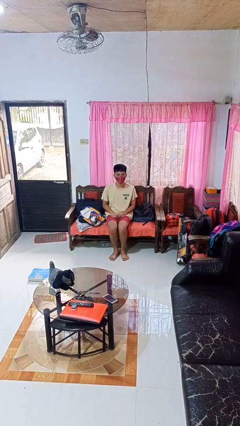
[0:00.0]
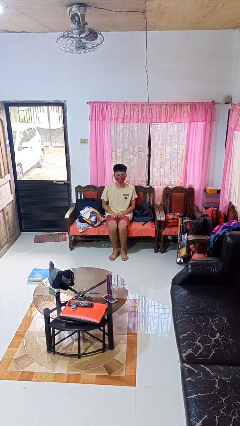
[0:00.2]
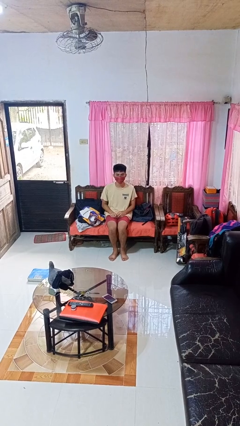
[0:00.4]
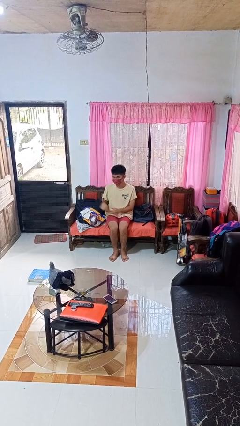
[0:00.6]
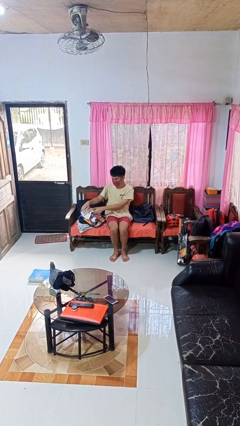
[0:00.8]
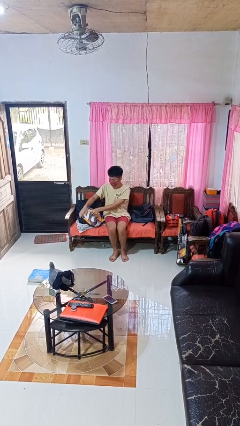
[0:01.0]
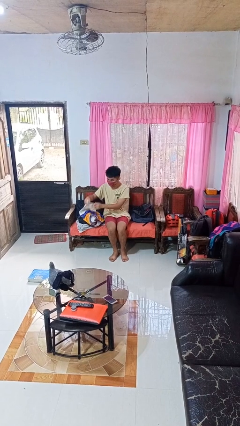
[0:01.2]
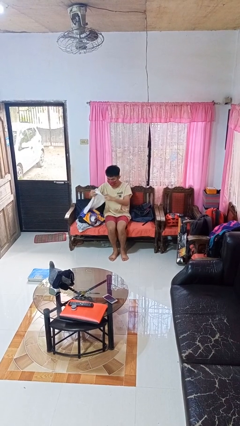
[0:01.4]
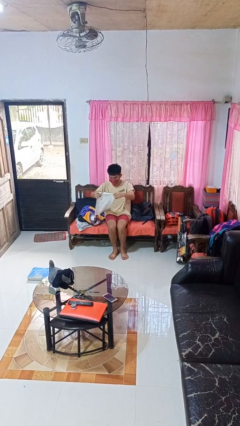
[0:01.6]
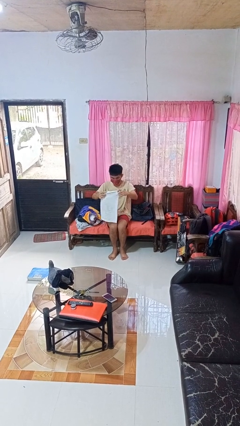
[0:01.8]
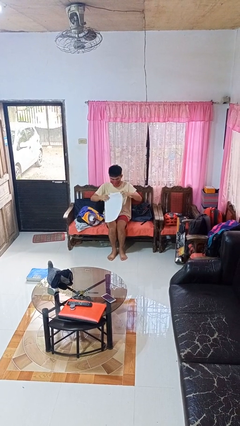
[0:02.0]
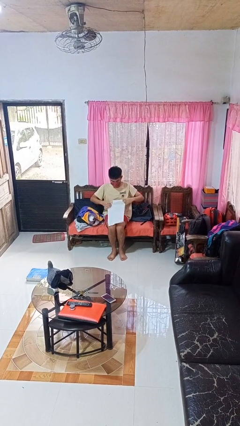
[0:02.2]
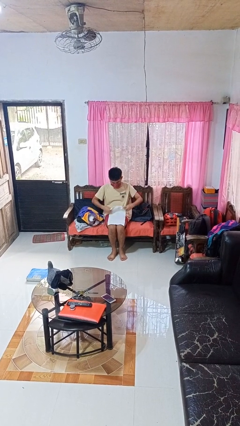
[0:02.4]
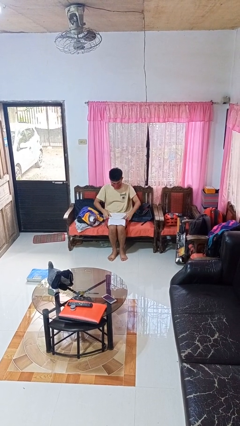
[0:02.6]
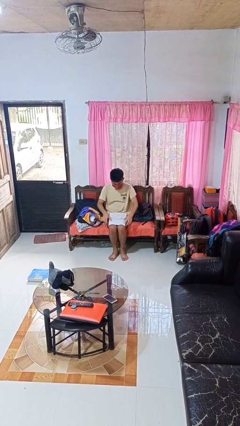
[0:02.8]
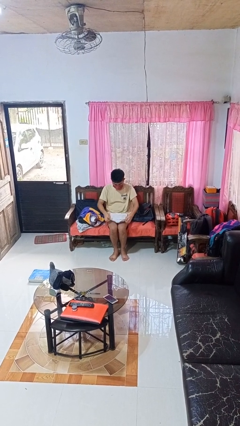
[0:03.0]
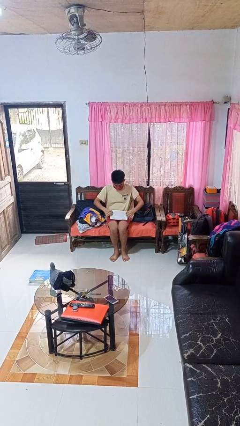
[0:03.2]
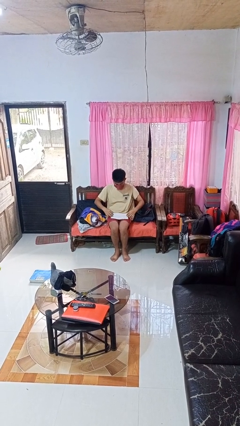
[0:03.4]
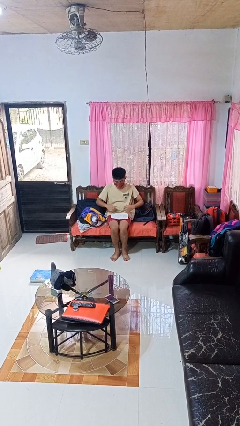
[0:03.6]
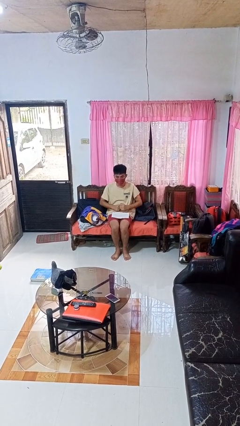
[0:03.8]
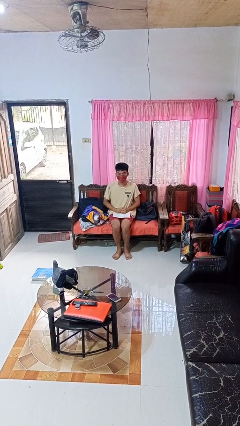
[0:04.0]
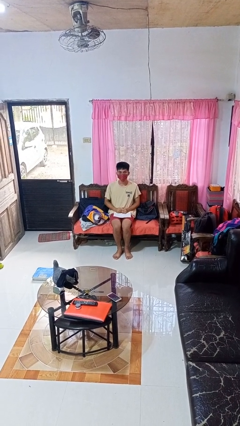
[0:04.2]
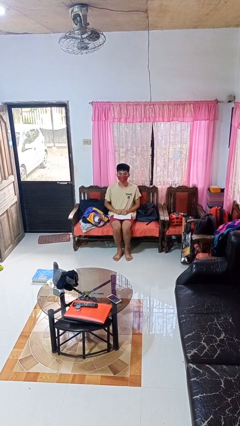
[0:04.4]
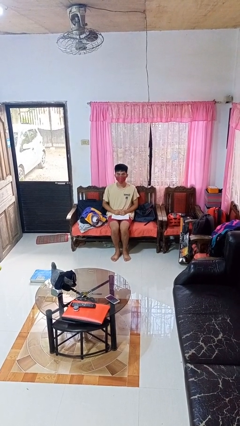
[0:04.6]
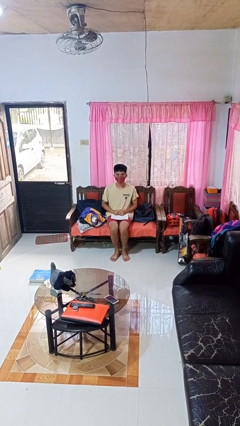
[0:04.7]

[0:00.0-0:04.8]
person folds towel

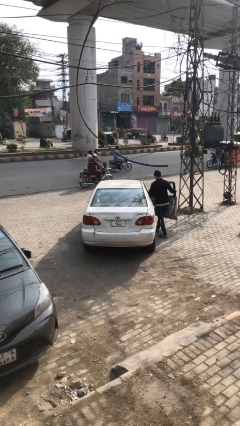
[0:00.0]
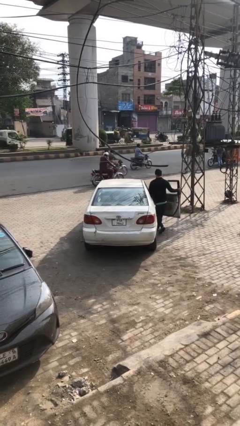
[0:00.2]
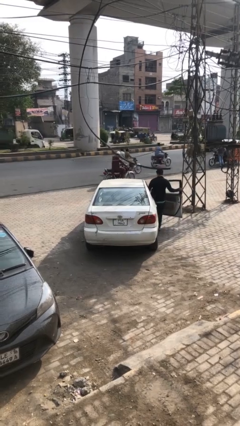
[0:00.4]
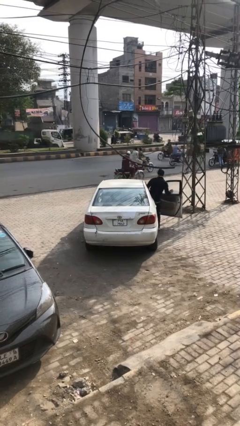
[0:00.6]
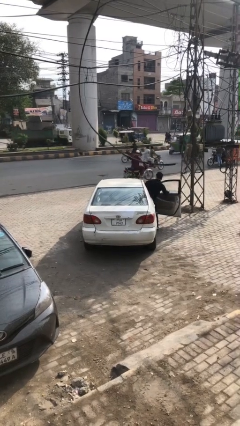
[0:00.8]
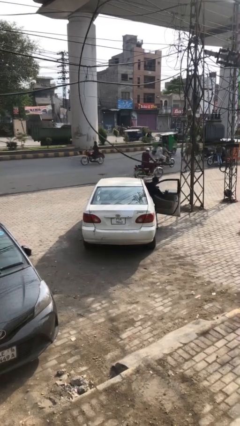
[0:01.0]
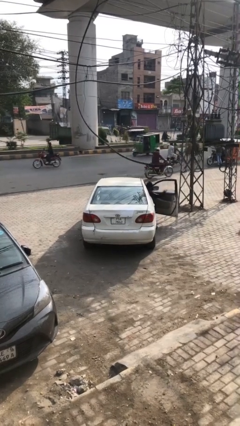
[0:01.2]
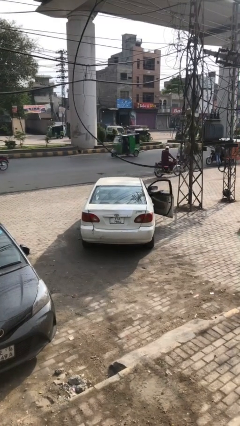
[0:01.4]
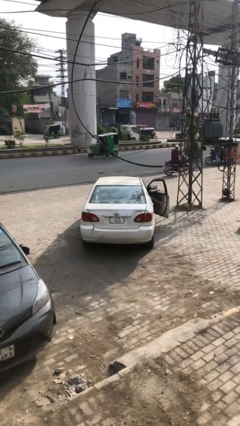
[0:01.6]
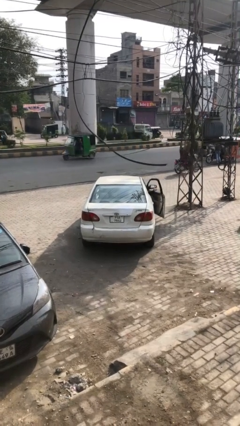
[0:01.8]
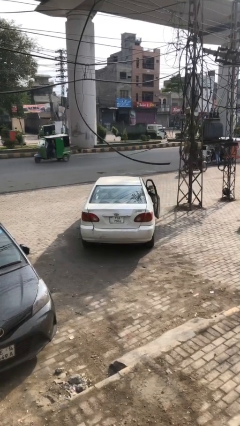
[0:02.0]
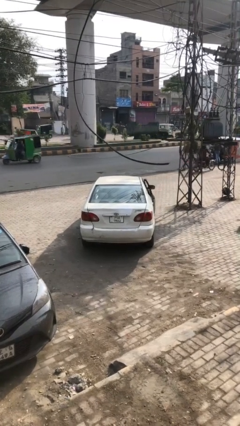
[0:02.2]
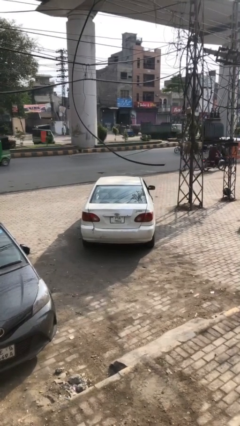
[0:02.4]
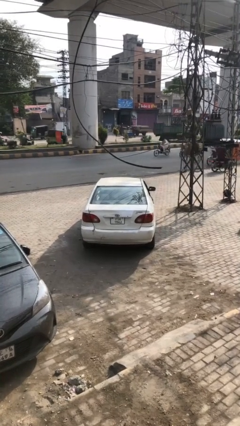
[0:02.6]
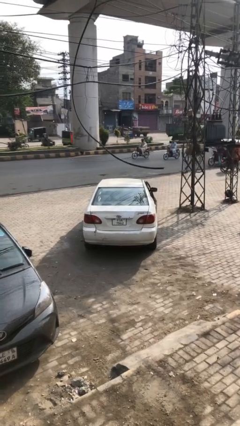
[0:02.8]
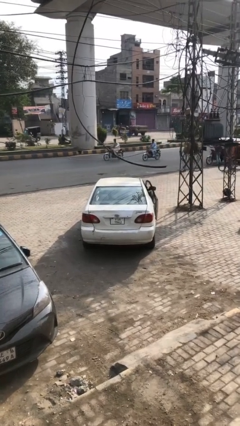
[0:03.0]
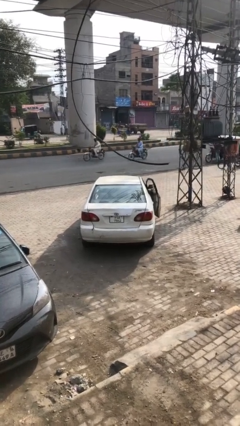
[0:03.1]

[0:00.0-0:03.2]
car picks up person

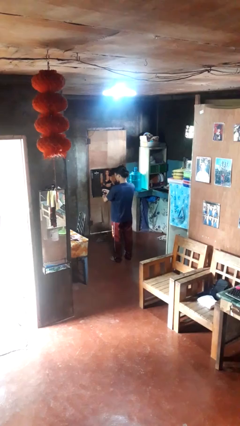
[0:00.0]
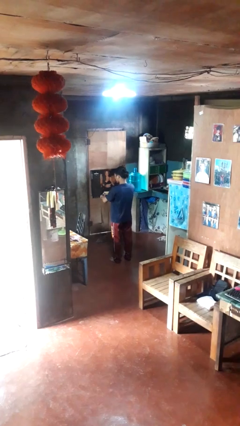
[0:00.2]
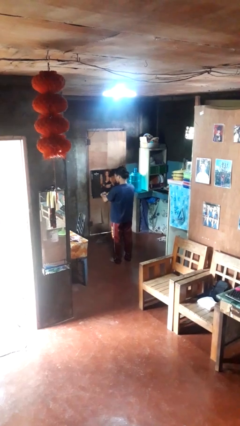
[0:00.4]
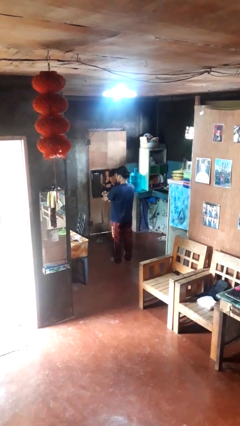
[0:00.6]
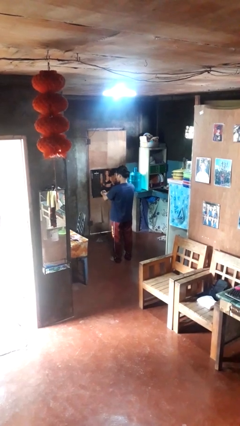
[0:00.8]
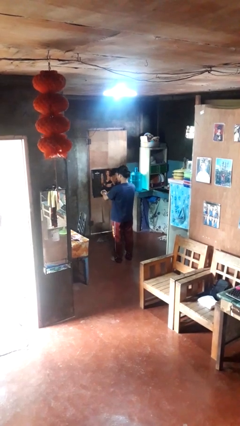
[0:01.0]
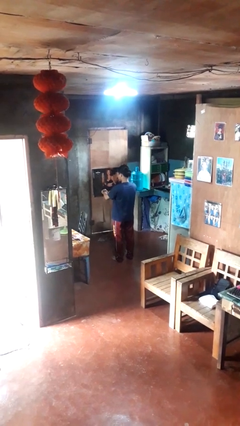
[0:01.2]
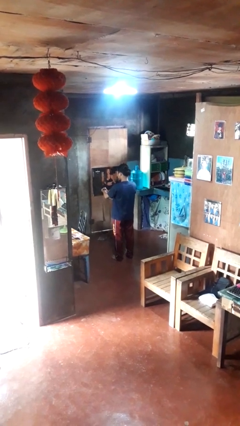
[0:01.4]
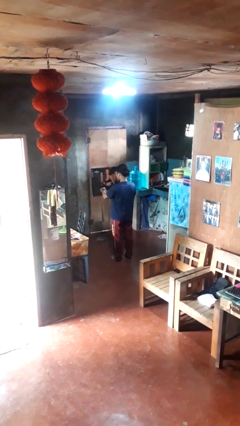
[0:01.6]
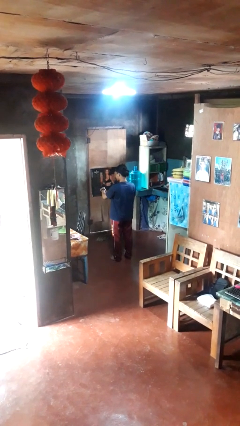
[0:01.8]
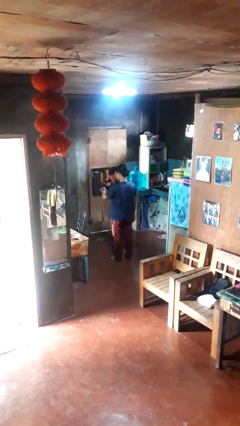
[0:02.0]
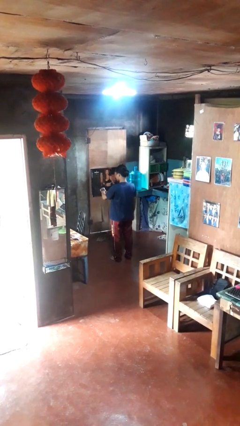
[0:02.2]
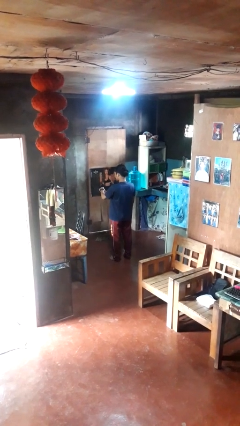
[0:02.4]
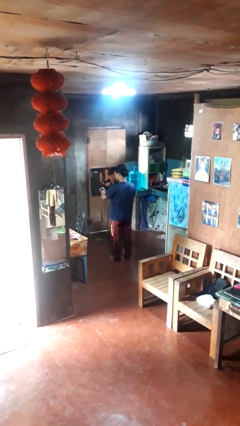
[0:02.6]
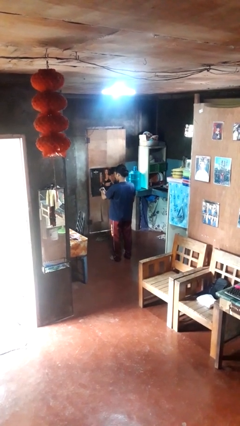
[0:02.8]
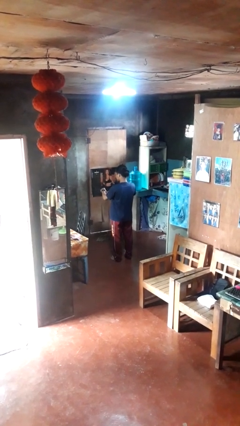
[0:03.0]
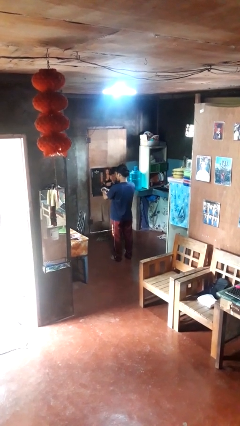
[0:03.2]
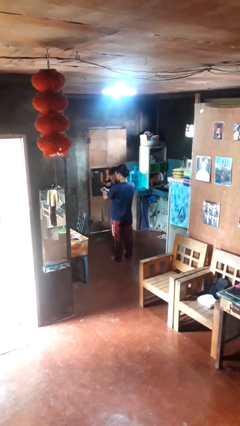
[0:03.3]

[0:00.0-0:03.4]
person puts on wristwatch

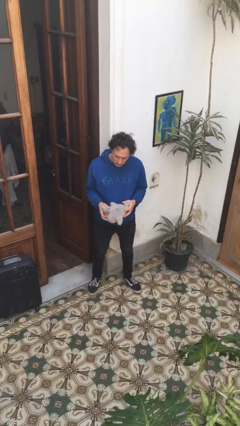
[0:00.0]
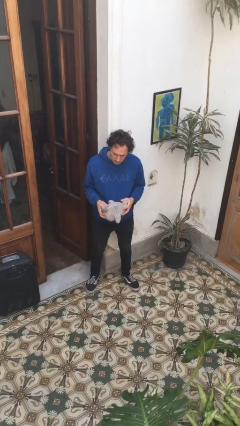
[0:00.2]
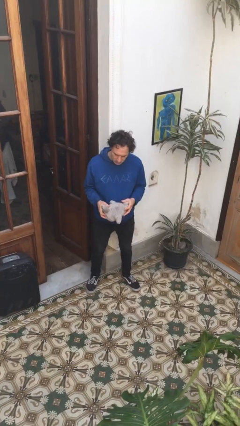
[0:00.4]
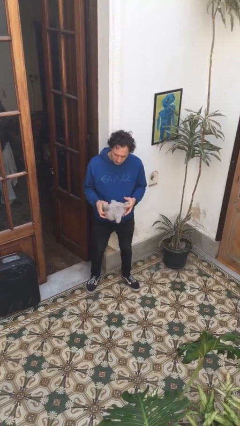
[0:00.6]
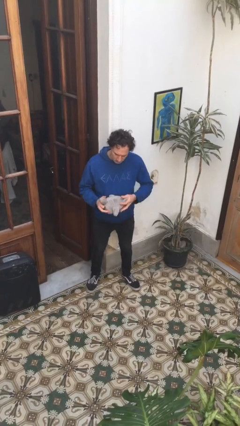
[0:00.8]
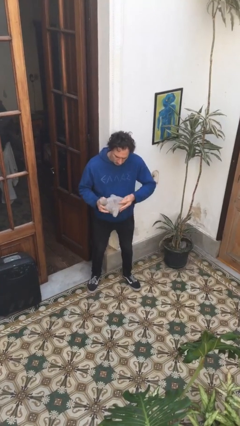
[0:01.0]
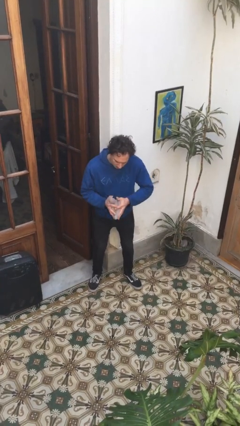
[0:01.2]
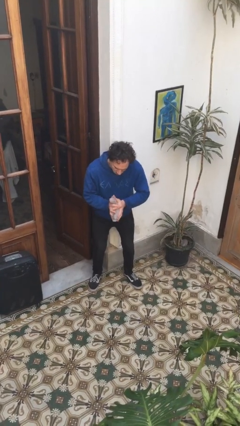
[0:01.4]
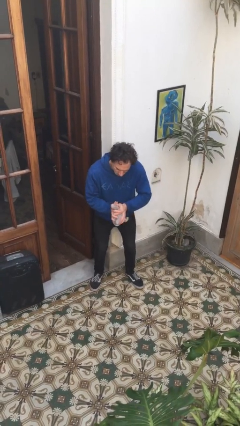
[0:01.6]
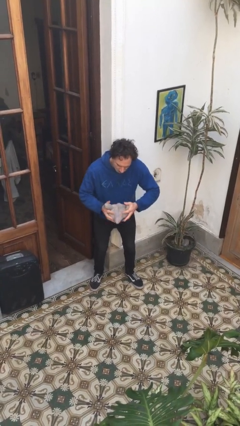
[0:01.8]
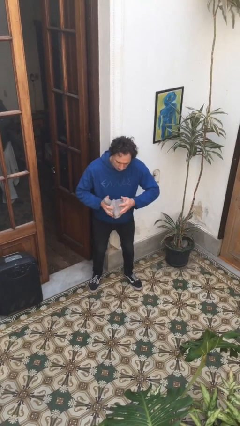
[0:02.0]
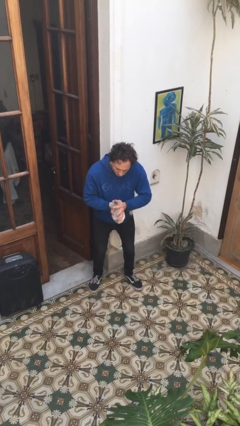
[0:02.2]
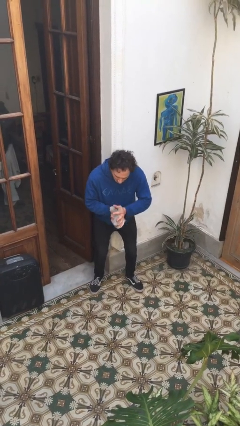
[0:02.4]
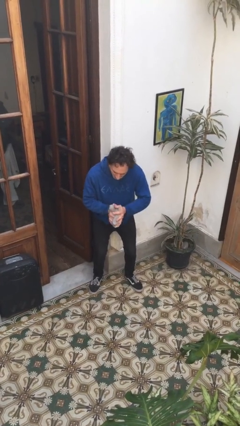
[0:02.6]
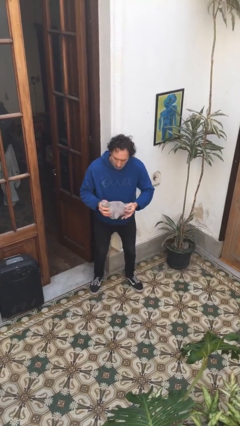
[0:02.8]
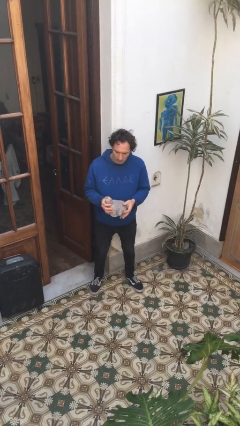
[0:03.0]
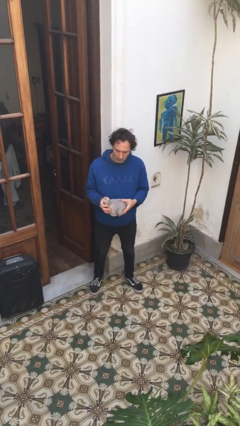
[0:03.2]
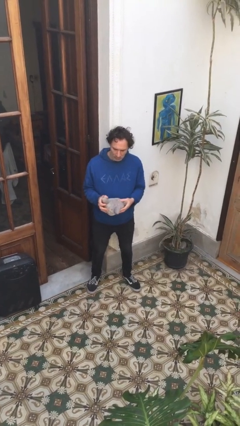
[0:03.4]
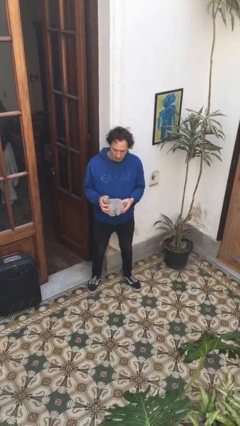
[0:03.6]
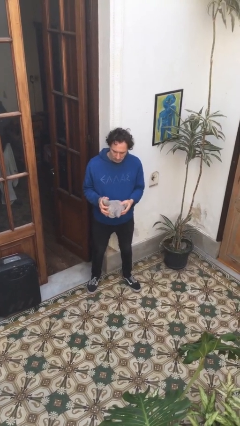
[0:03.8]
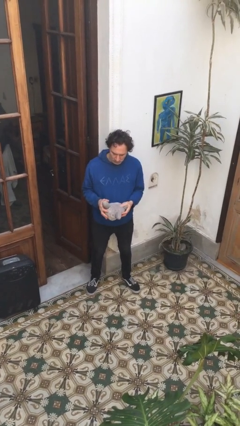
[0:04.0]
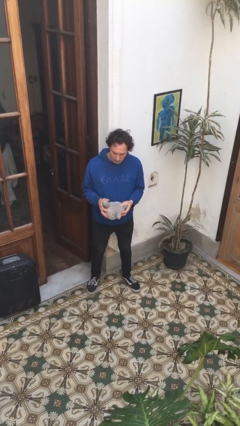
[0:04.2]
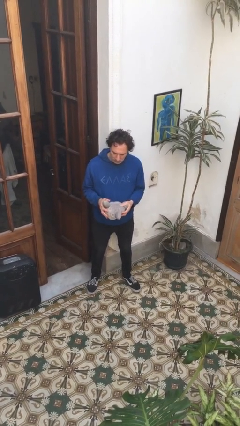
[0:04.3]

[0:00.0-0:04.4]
person squeezes object

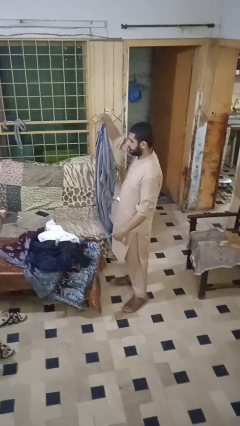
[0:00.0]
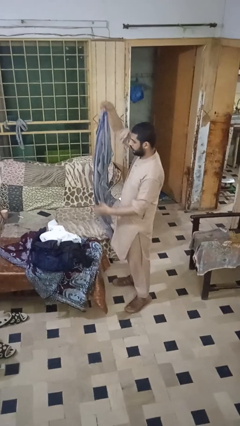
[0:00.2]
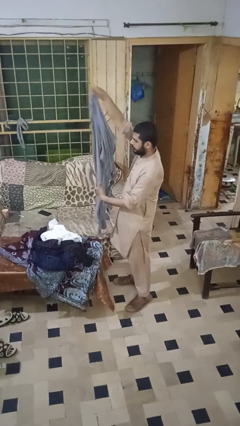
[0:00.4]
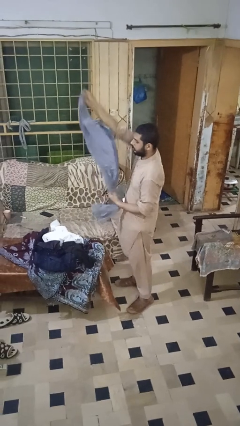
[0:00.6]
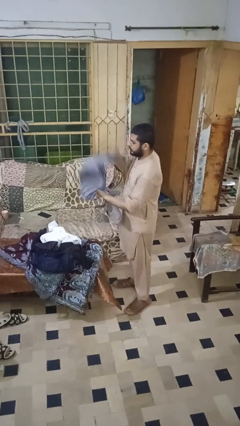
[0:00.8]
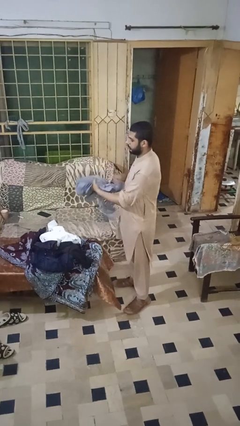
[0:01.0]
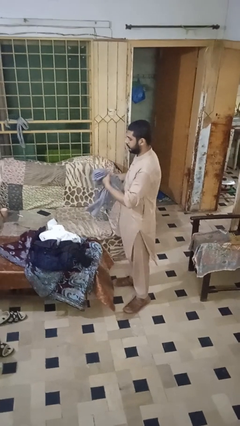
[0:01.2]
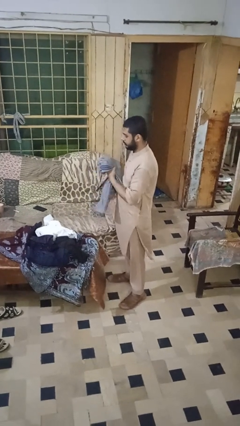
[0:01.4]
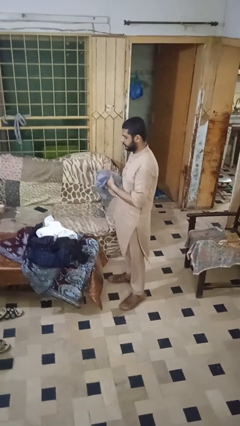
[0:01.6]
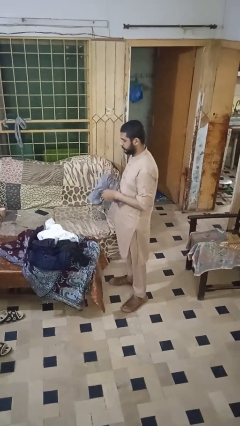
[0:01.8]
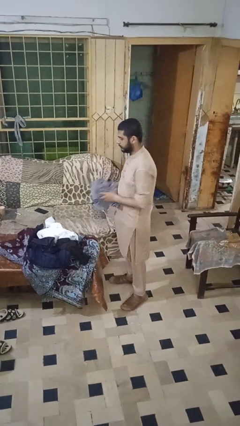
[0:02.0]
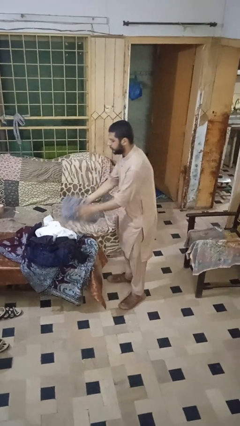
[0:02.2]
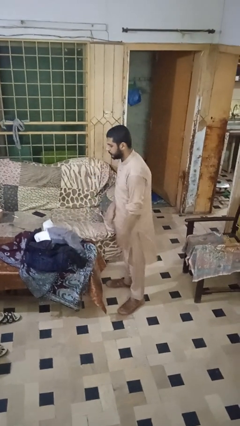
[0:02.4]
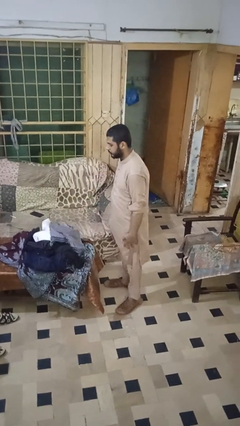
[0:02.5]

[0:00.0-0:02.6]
person folds pants
